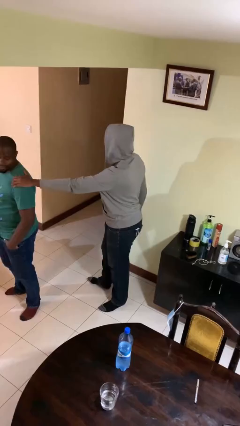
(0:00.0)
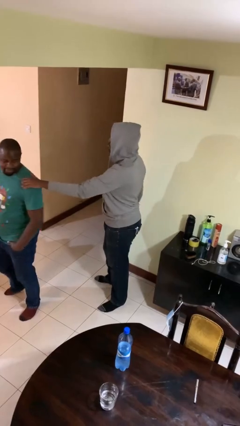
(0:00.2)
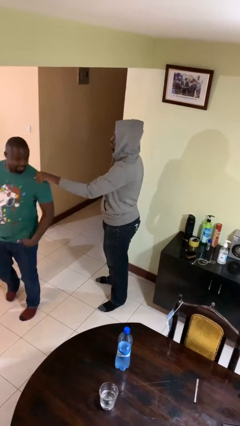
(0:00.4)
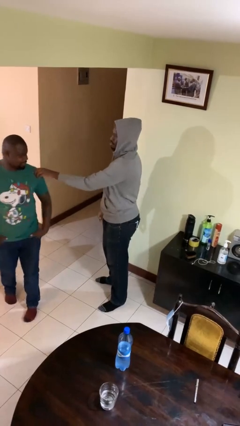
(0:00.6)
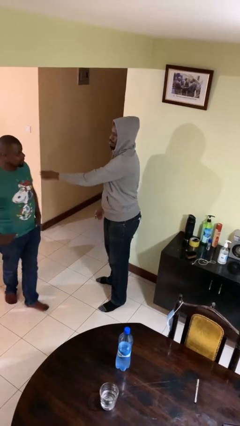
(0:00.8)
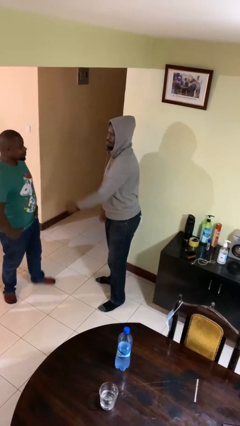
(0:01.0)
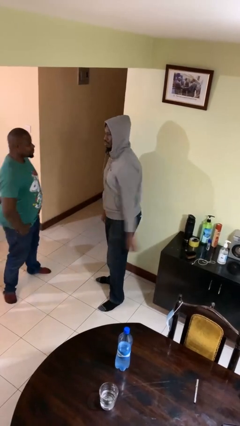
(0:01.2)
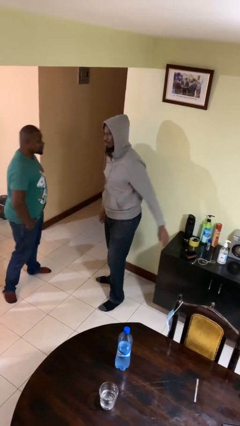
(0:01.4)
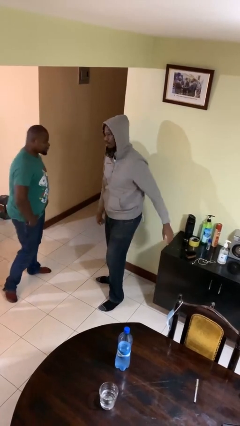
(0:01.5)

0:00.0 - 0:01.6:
person spins person around

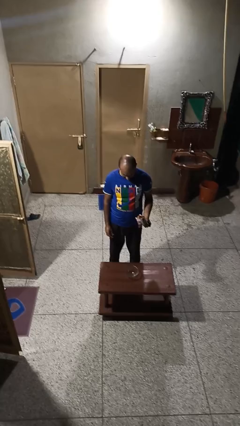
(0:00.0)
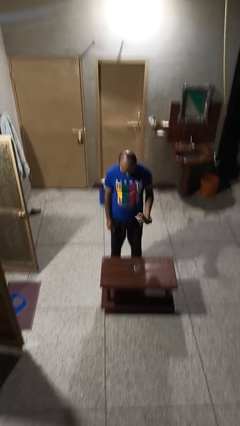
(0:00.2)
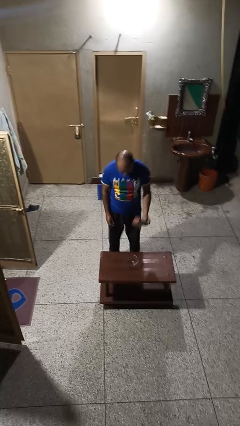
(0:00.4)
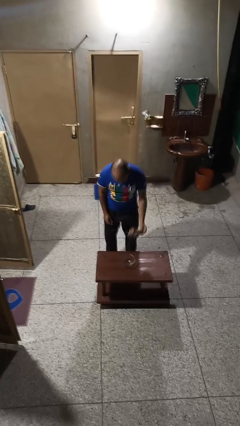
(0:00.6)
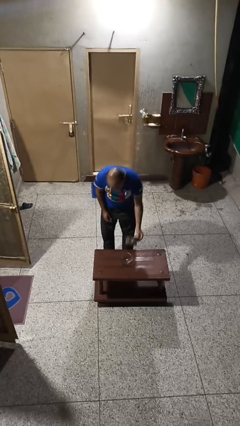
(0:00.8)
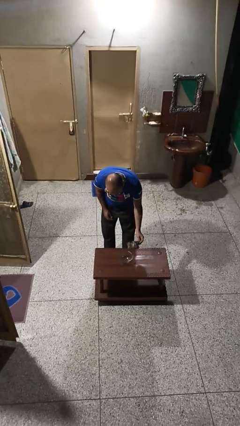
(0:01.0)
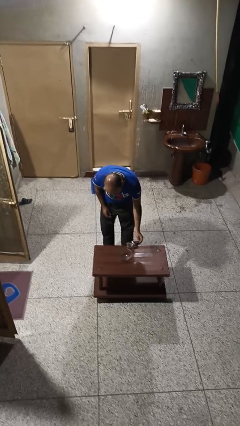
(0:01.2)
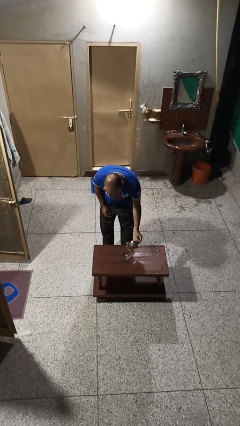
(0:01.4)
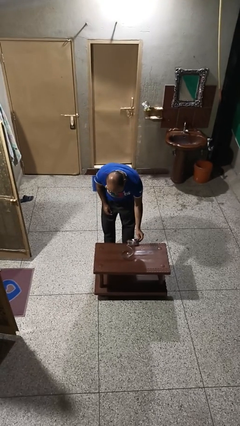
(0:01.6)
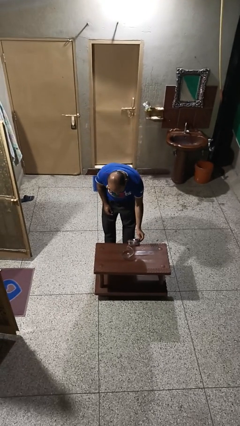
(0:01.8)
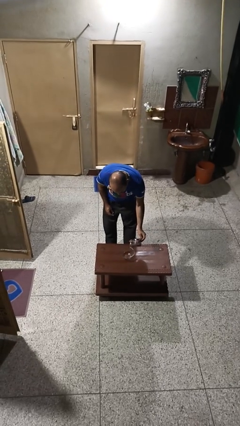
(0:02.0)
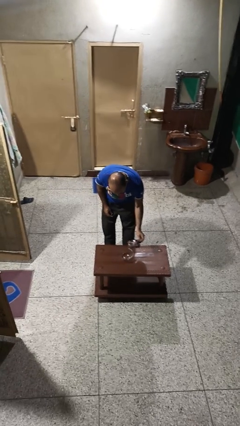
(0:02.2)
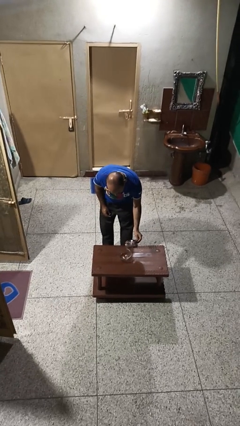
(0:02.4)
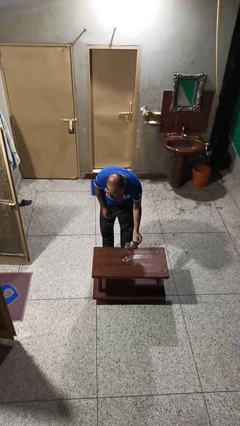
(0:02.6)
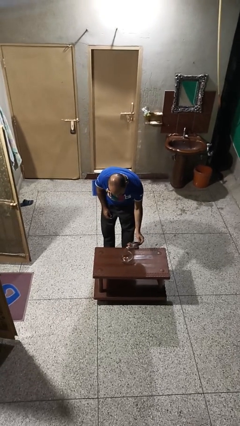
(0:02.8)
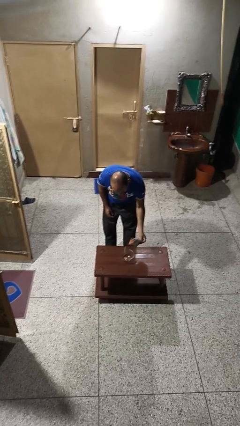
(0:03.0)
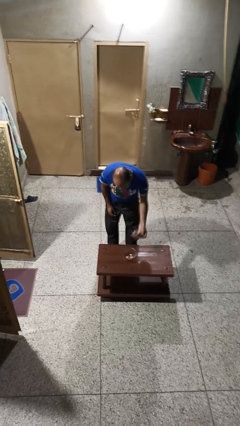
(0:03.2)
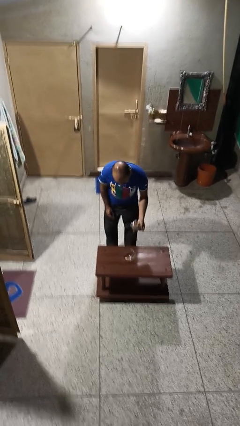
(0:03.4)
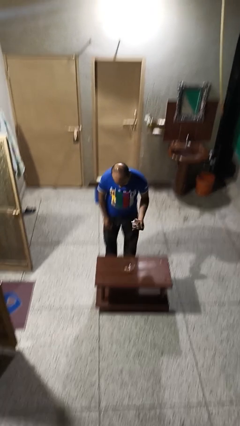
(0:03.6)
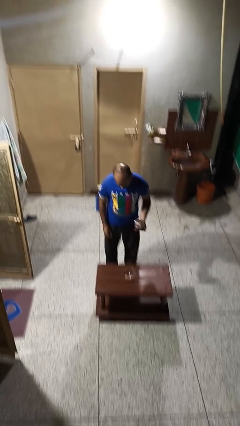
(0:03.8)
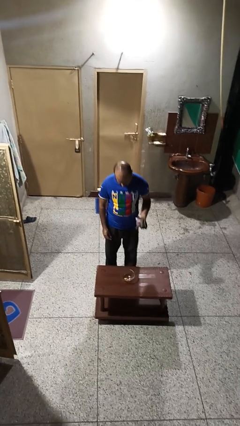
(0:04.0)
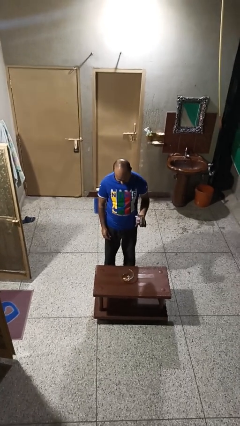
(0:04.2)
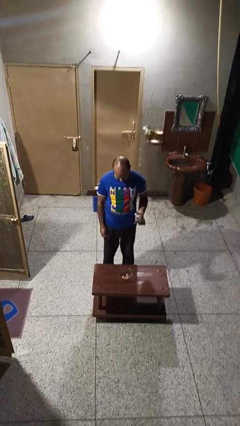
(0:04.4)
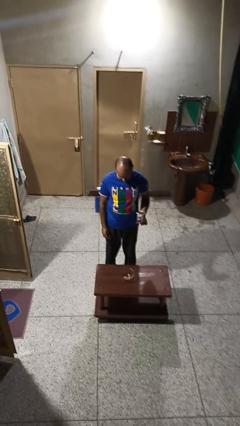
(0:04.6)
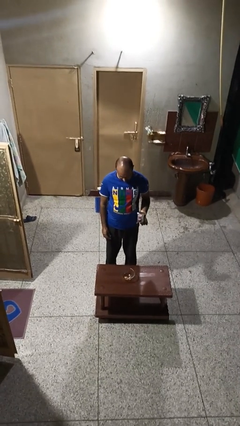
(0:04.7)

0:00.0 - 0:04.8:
person pours into bowl

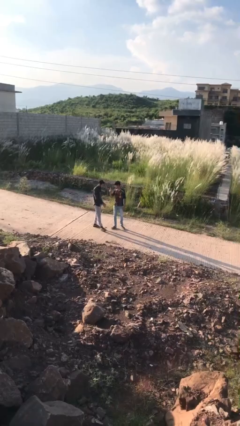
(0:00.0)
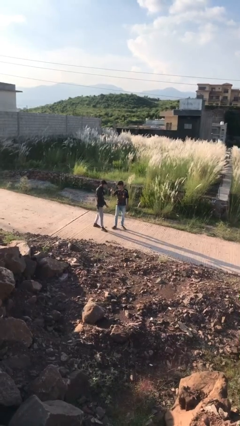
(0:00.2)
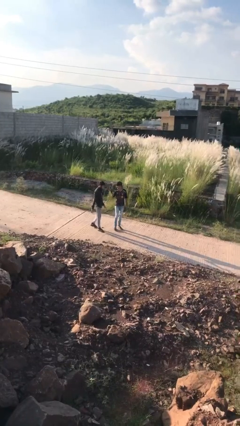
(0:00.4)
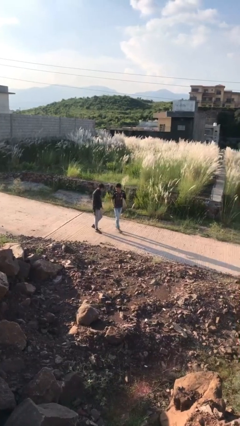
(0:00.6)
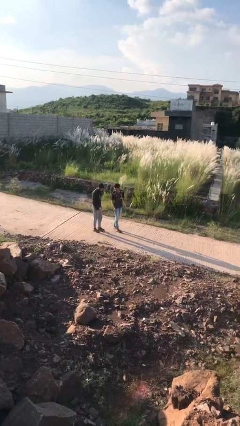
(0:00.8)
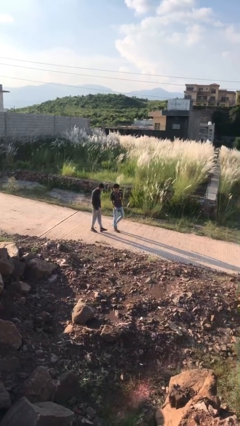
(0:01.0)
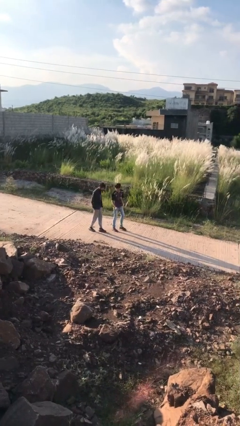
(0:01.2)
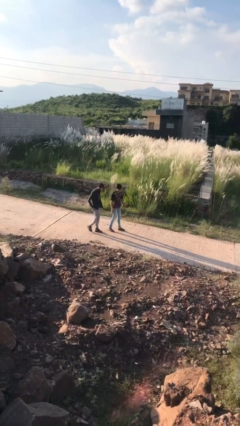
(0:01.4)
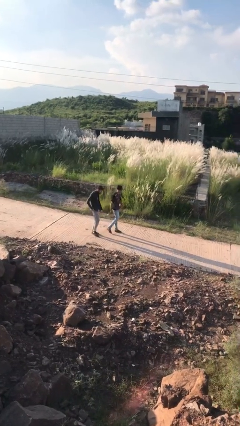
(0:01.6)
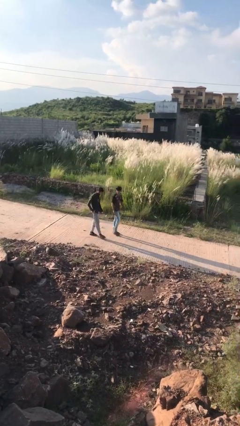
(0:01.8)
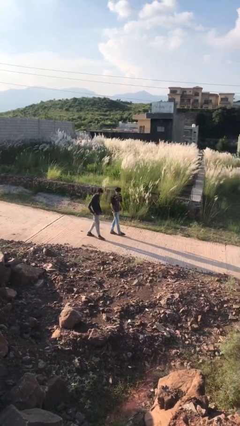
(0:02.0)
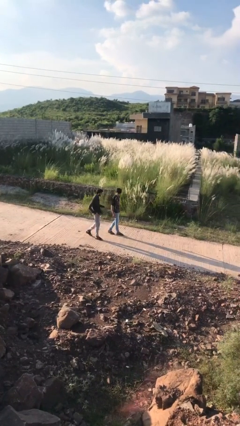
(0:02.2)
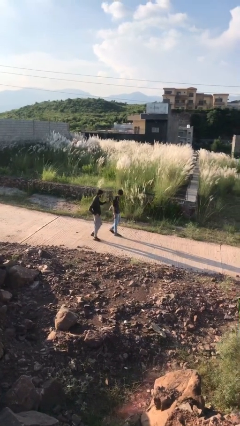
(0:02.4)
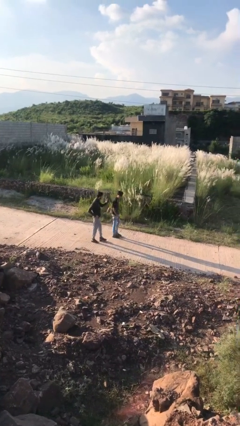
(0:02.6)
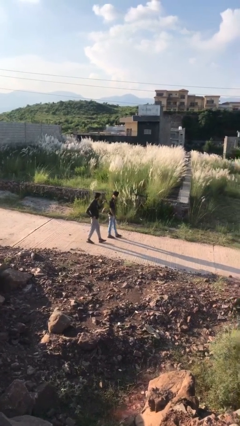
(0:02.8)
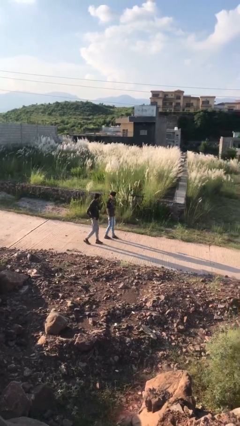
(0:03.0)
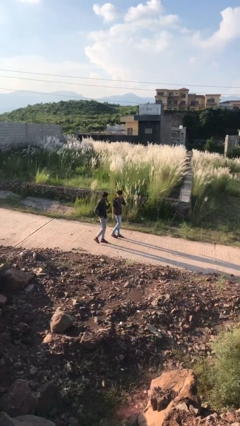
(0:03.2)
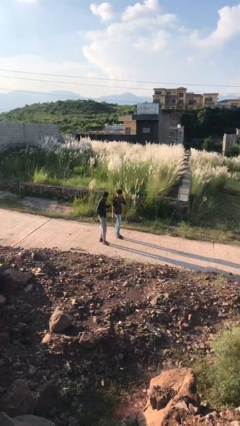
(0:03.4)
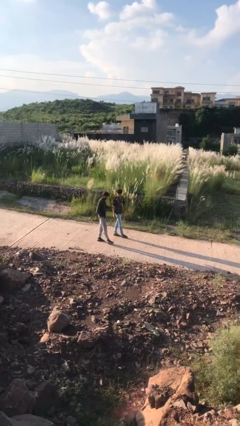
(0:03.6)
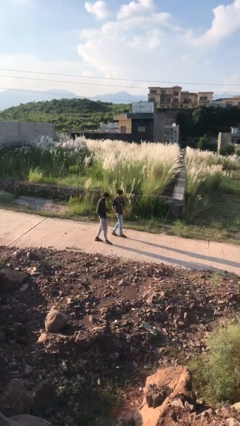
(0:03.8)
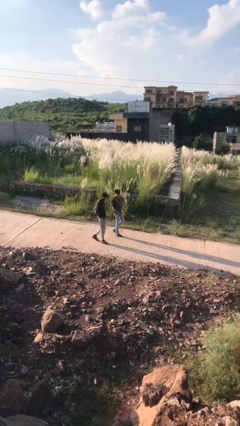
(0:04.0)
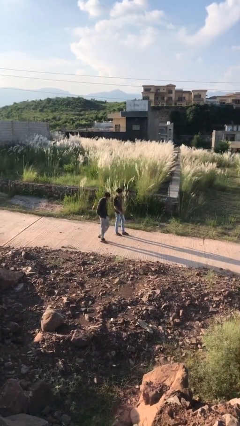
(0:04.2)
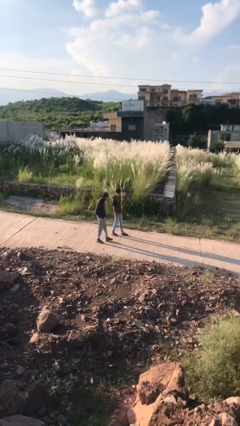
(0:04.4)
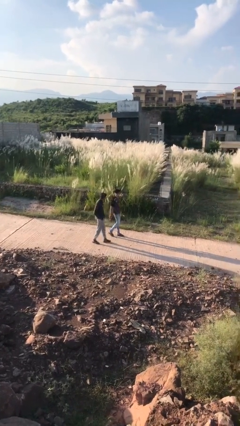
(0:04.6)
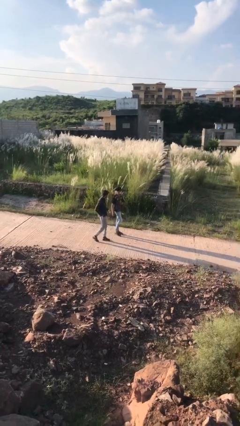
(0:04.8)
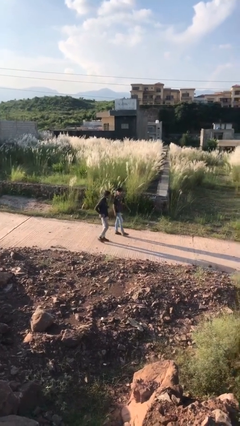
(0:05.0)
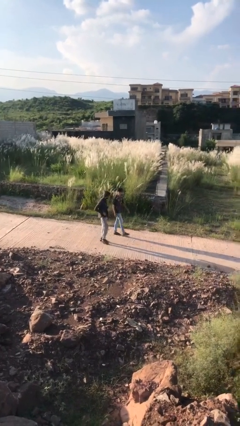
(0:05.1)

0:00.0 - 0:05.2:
person talks to person

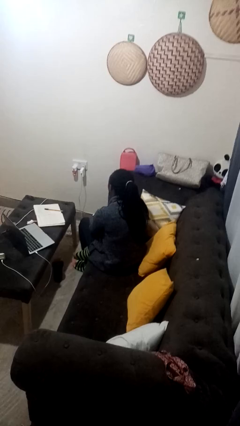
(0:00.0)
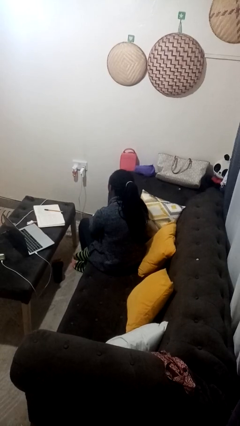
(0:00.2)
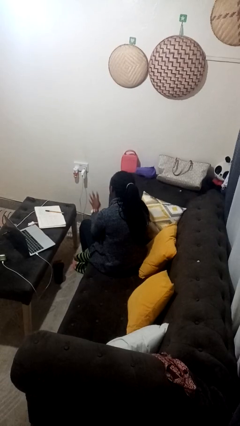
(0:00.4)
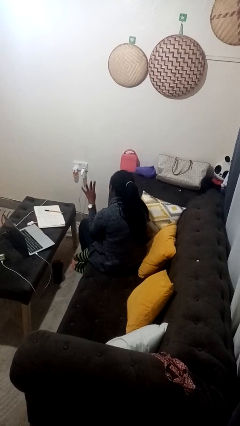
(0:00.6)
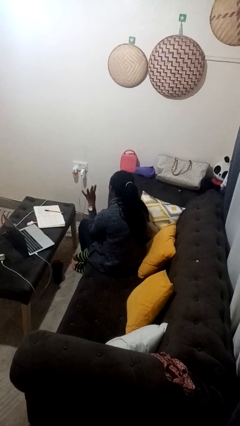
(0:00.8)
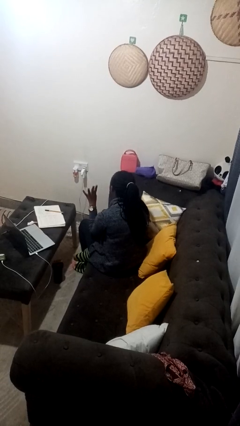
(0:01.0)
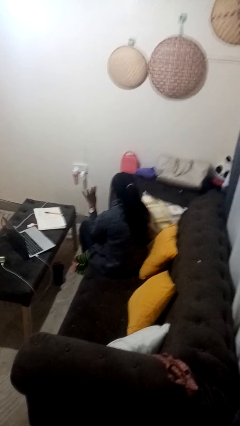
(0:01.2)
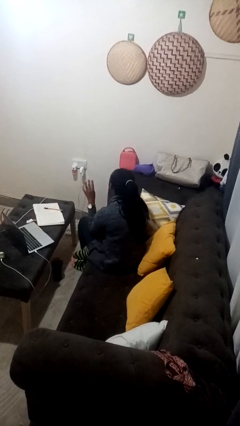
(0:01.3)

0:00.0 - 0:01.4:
person gestures number four

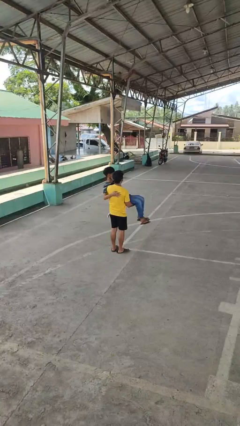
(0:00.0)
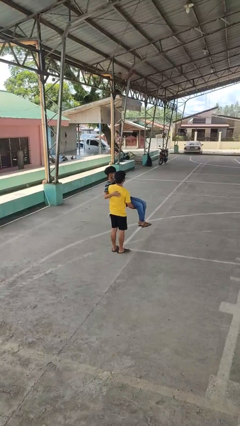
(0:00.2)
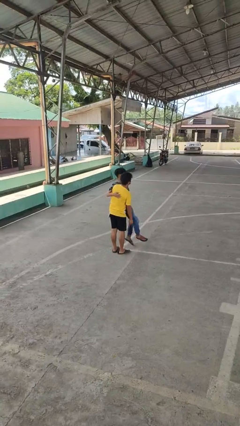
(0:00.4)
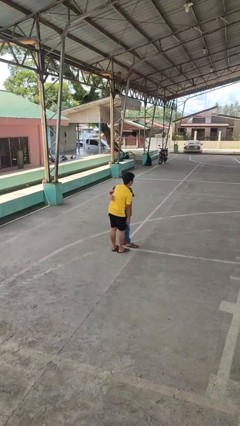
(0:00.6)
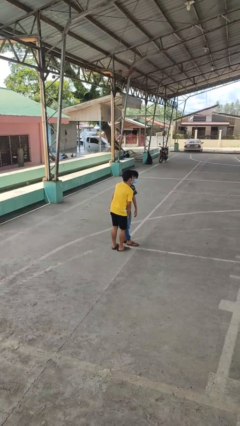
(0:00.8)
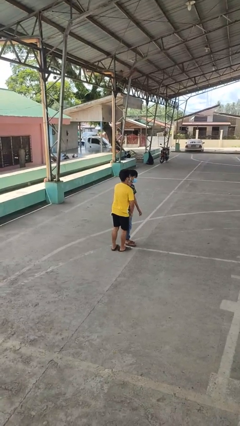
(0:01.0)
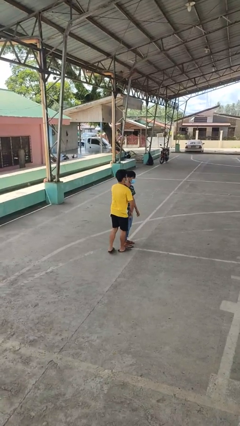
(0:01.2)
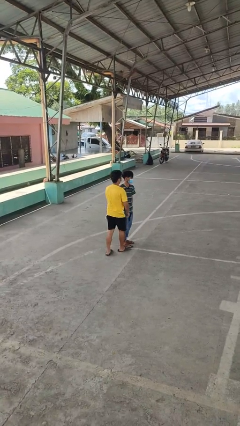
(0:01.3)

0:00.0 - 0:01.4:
person puts down person

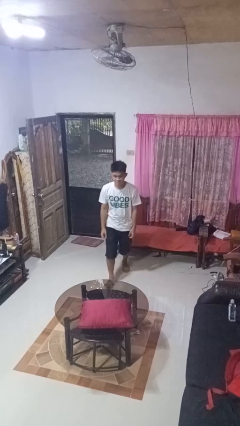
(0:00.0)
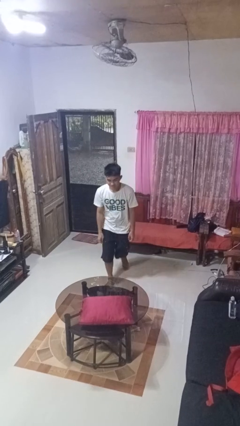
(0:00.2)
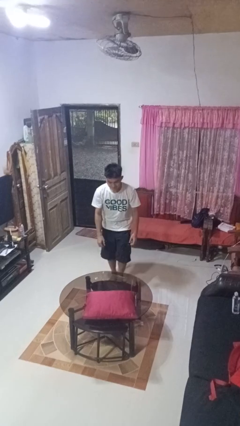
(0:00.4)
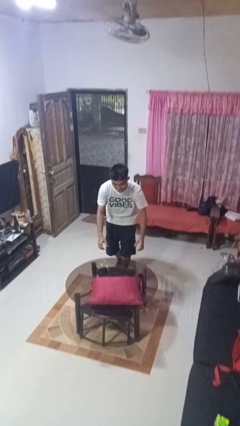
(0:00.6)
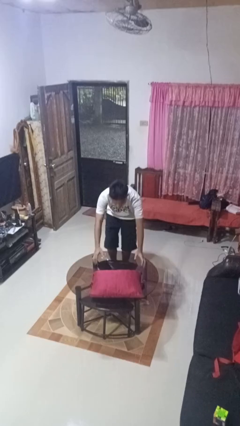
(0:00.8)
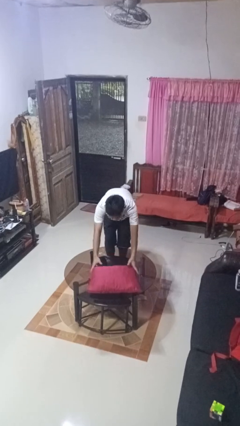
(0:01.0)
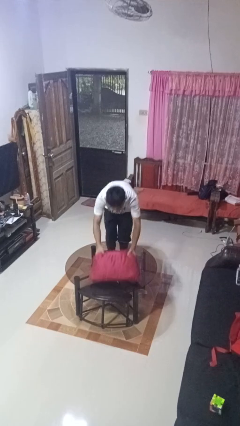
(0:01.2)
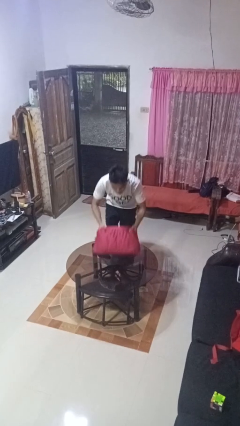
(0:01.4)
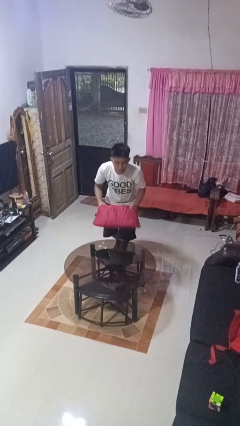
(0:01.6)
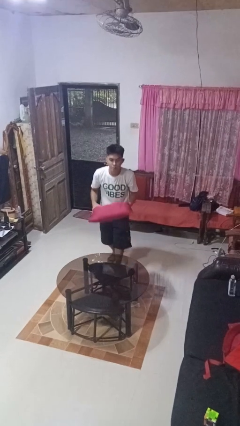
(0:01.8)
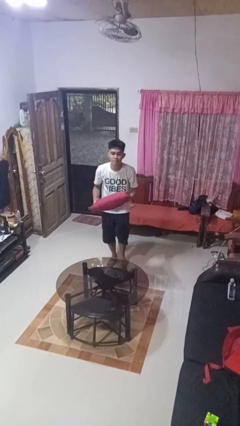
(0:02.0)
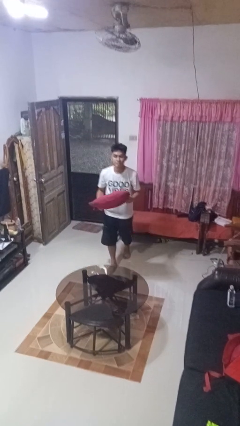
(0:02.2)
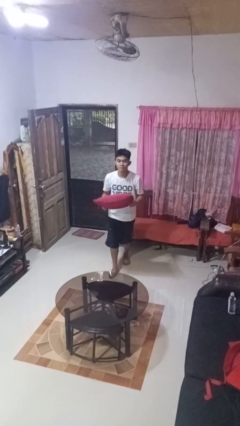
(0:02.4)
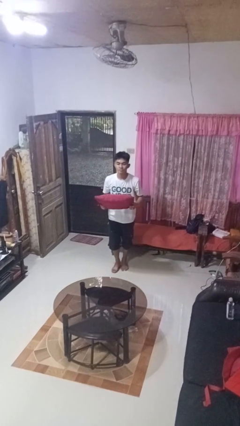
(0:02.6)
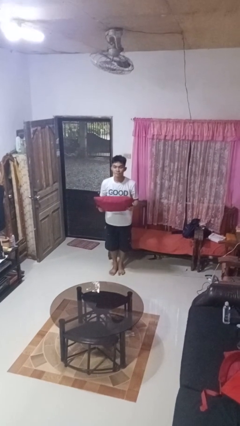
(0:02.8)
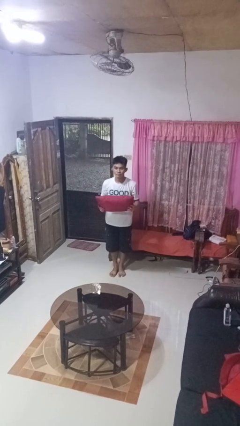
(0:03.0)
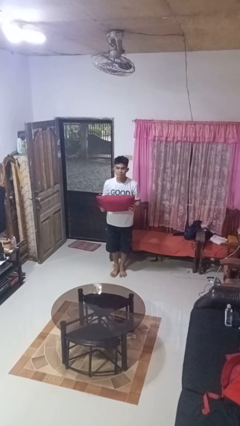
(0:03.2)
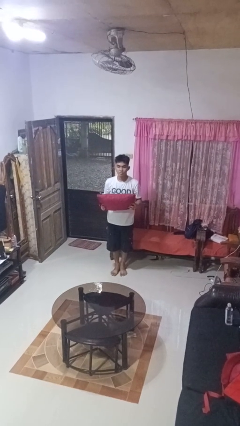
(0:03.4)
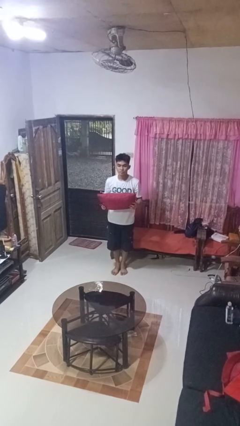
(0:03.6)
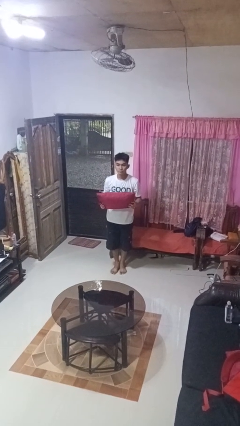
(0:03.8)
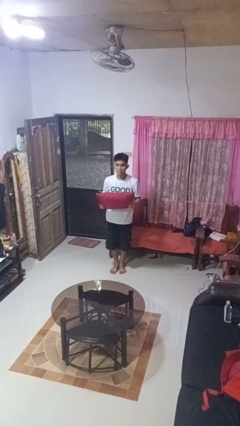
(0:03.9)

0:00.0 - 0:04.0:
person picks up object from table
